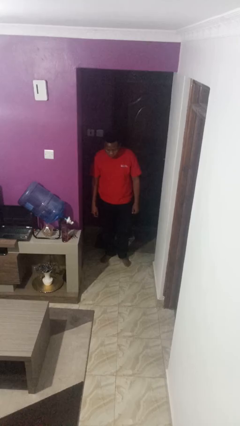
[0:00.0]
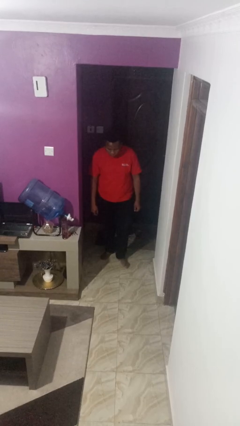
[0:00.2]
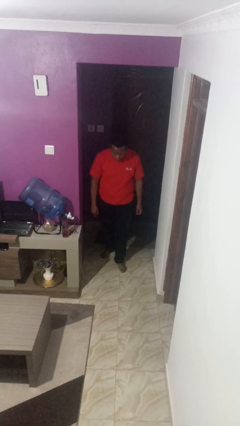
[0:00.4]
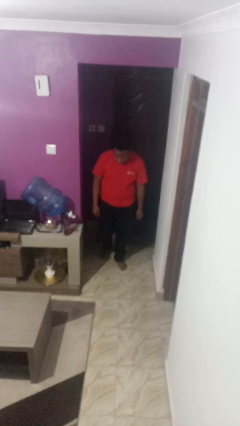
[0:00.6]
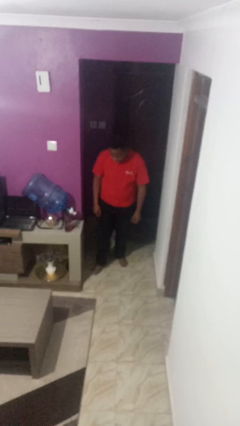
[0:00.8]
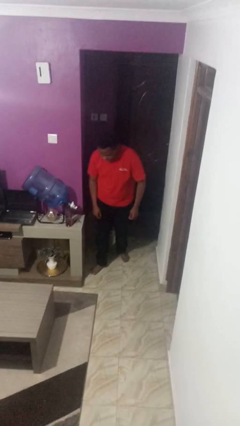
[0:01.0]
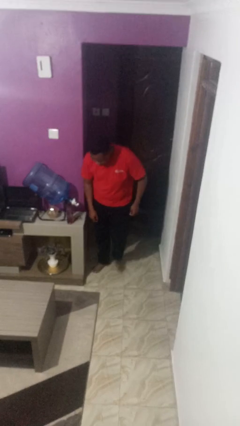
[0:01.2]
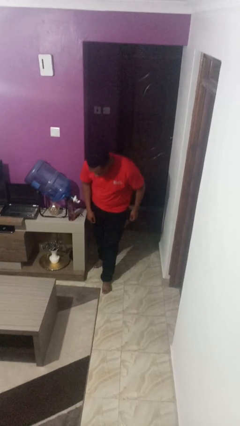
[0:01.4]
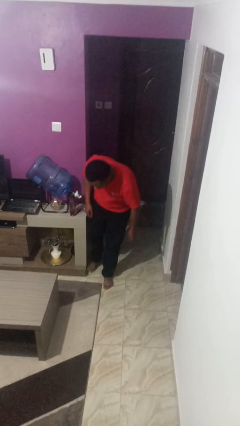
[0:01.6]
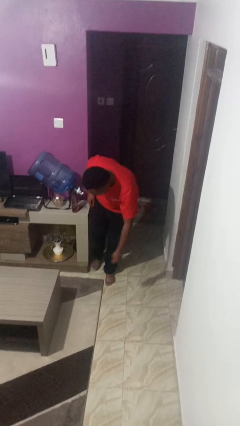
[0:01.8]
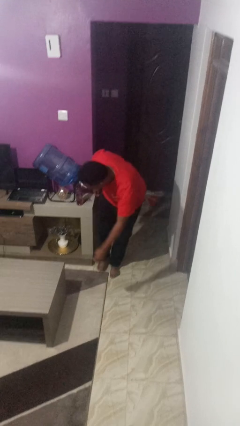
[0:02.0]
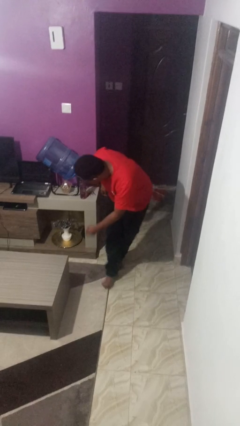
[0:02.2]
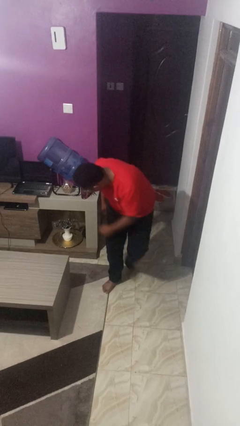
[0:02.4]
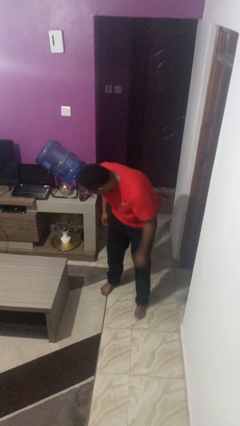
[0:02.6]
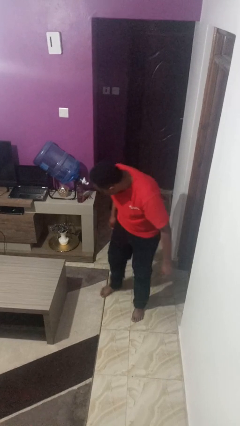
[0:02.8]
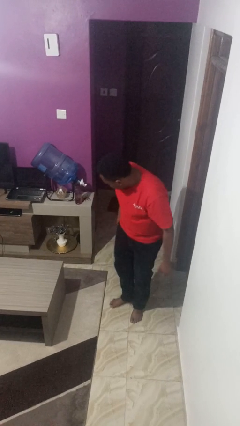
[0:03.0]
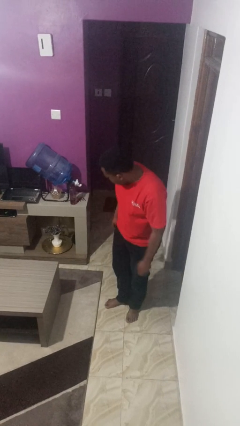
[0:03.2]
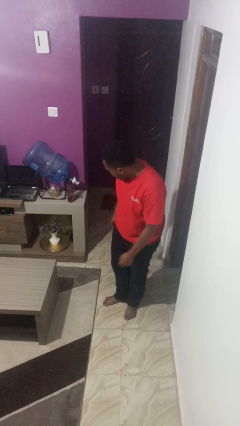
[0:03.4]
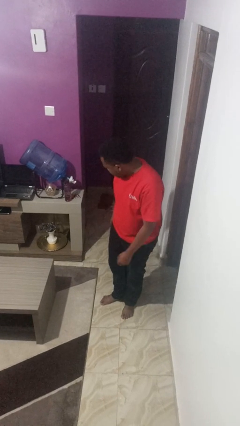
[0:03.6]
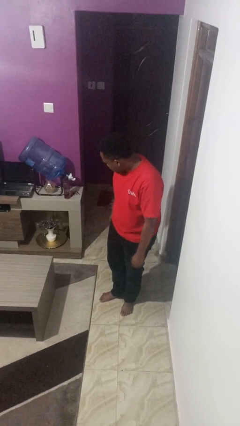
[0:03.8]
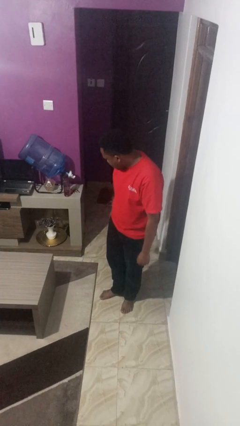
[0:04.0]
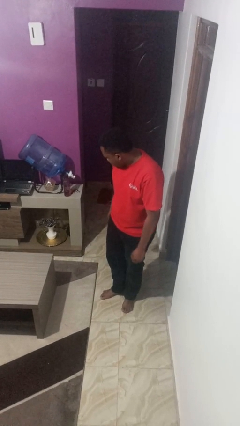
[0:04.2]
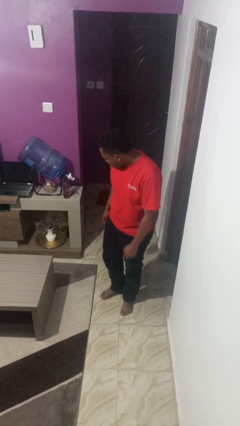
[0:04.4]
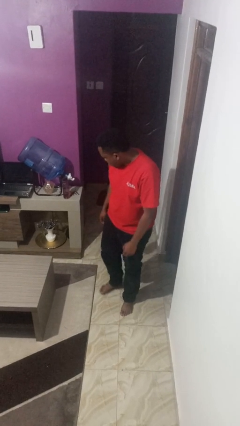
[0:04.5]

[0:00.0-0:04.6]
person stubs toe

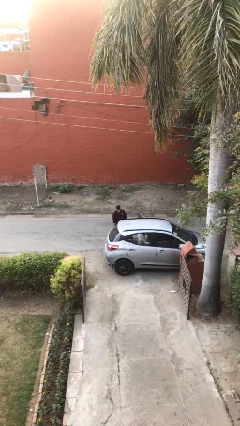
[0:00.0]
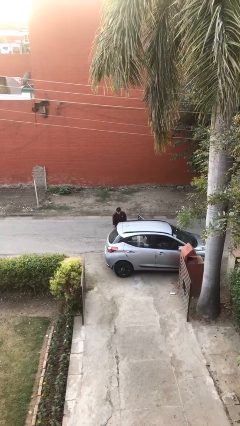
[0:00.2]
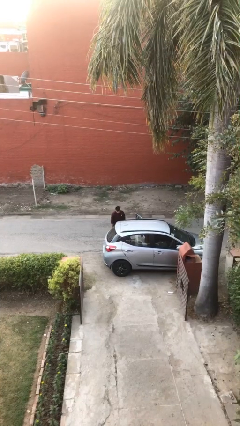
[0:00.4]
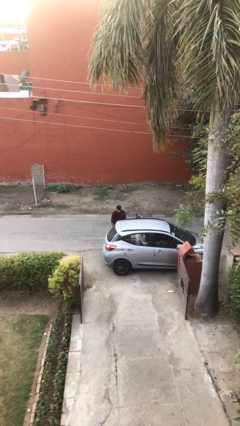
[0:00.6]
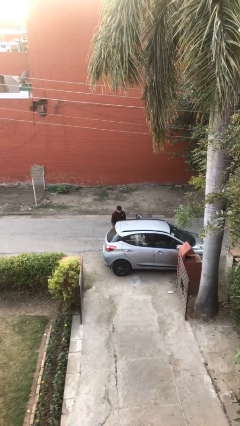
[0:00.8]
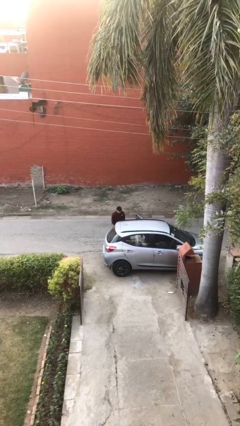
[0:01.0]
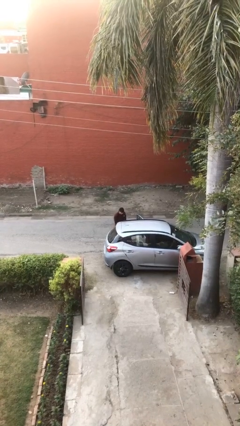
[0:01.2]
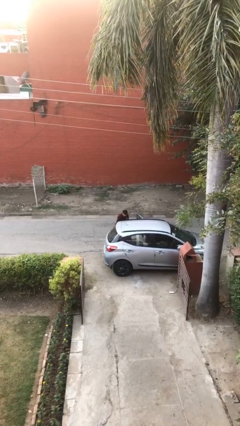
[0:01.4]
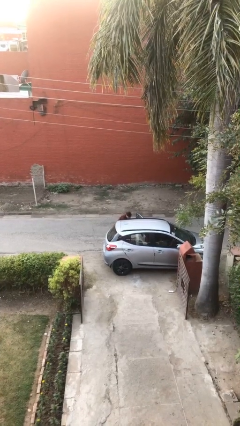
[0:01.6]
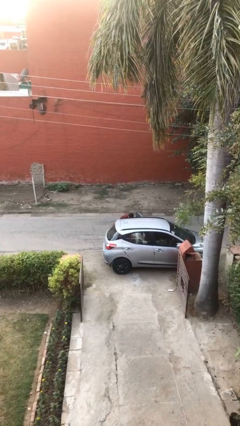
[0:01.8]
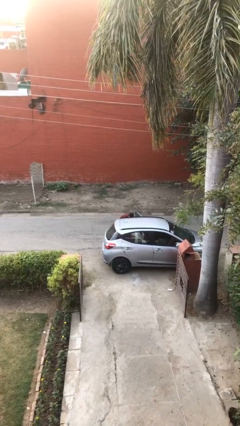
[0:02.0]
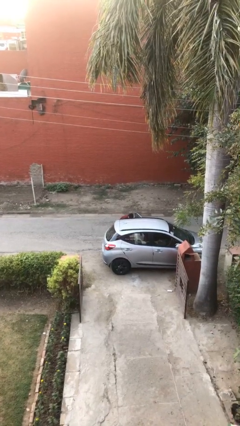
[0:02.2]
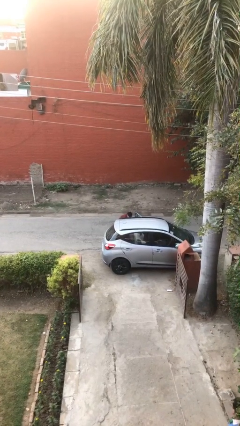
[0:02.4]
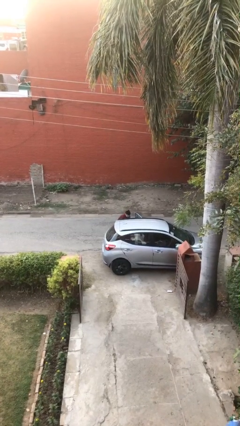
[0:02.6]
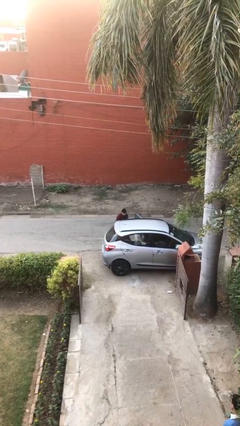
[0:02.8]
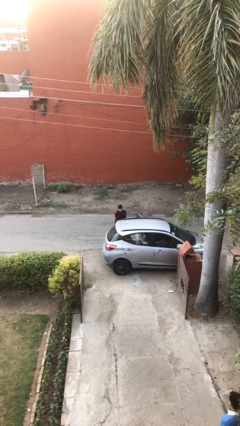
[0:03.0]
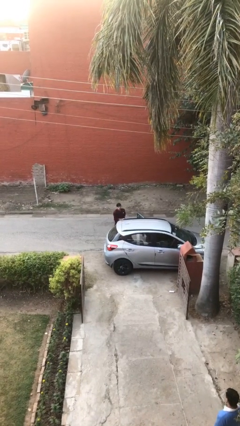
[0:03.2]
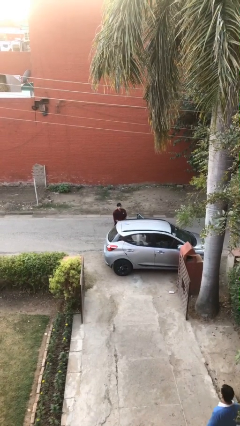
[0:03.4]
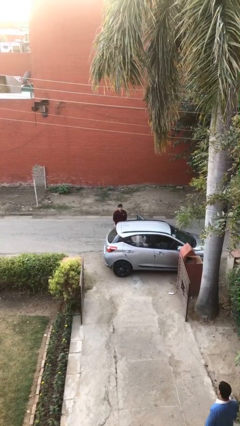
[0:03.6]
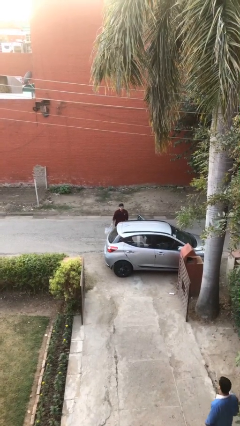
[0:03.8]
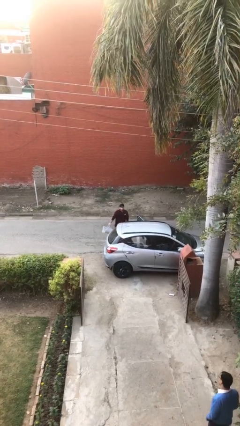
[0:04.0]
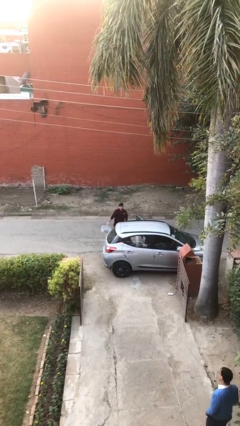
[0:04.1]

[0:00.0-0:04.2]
person unloads car

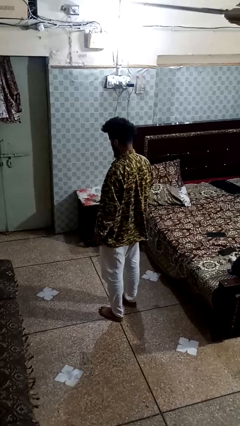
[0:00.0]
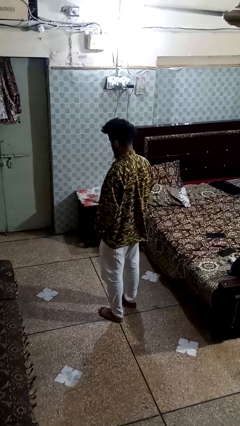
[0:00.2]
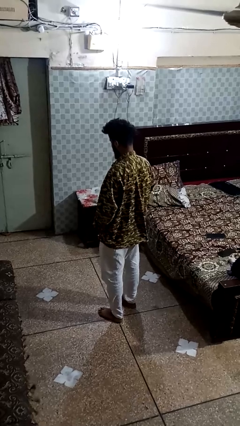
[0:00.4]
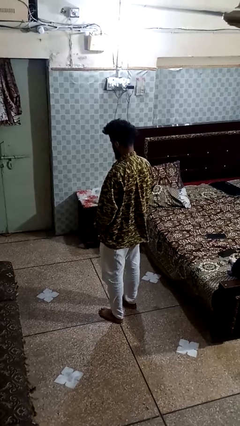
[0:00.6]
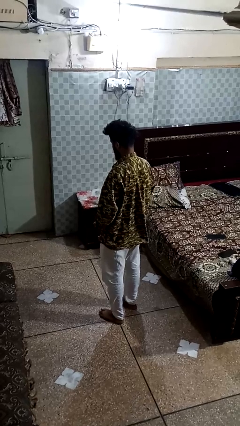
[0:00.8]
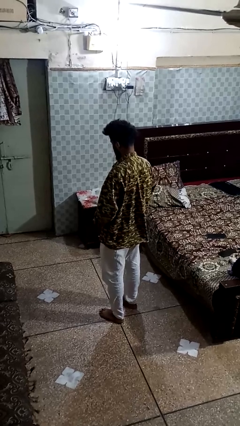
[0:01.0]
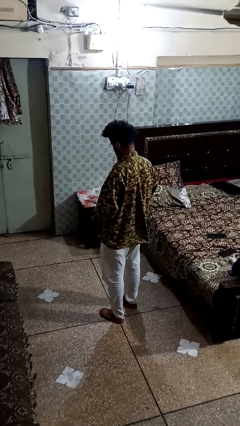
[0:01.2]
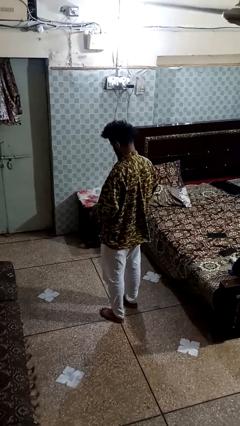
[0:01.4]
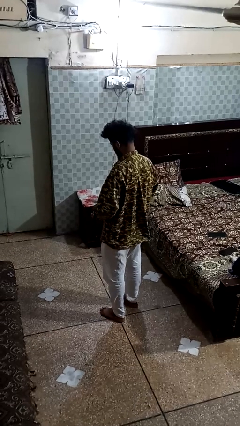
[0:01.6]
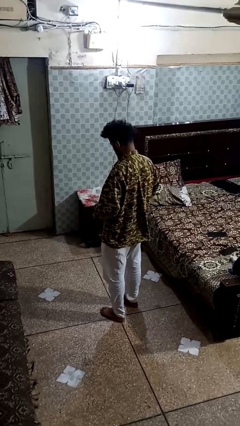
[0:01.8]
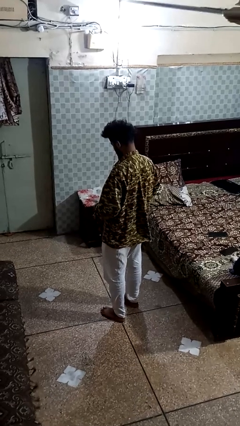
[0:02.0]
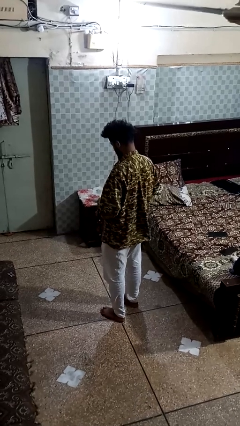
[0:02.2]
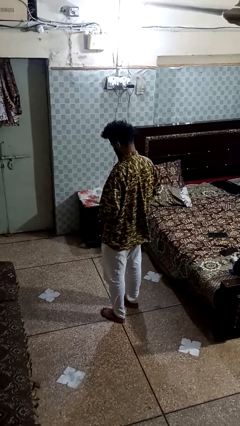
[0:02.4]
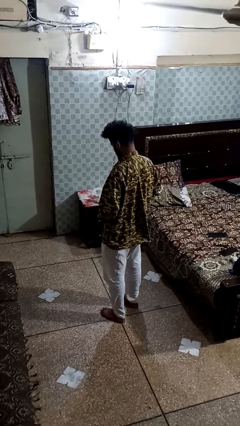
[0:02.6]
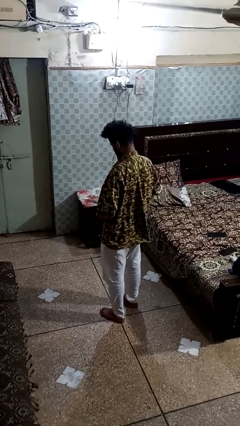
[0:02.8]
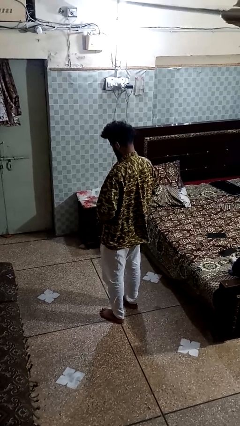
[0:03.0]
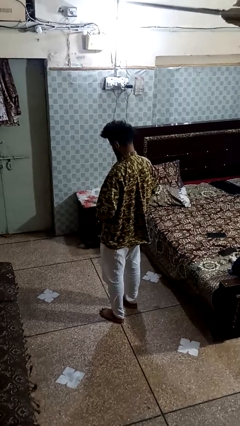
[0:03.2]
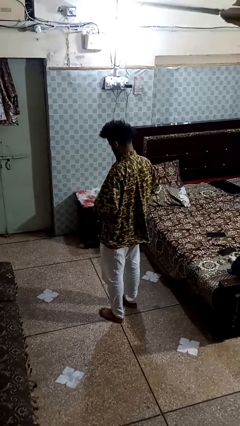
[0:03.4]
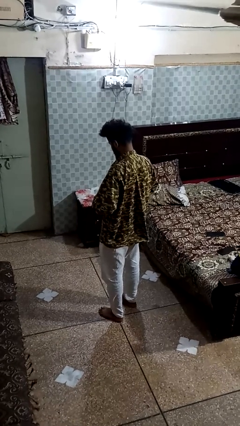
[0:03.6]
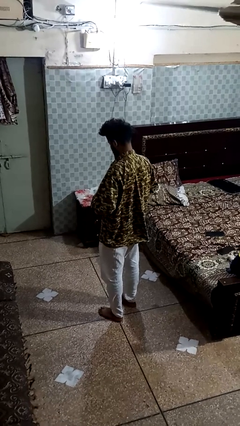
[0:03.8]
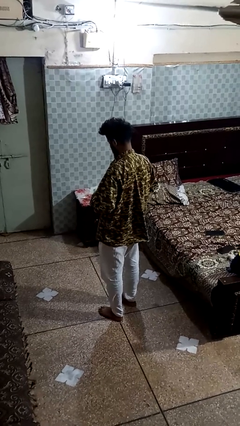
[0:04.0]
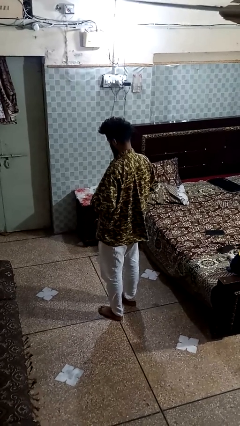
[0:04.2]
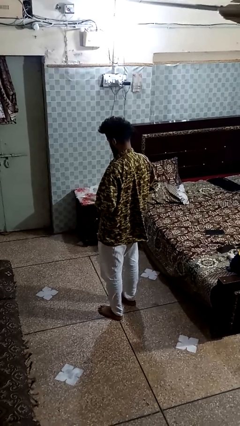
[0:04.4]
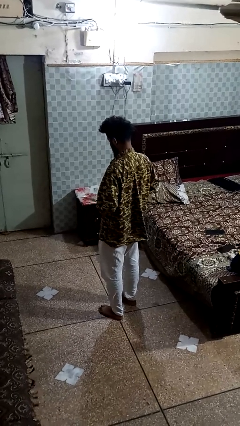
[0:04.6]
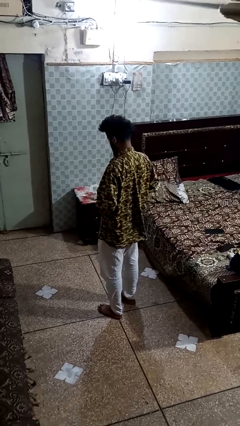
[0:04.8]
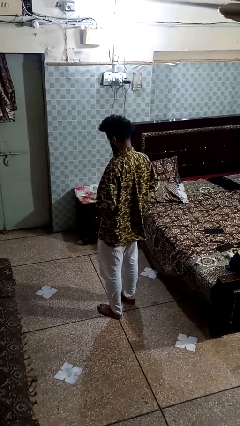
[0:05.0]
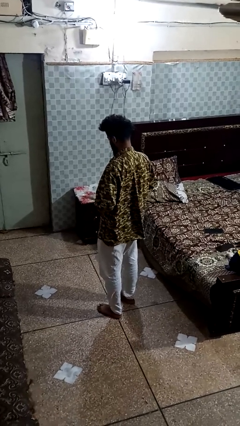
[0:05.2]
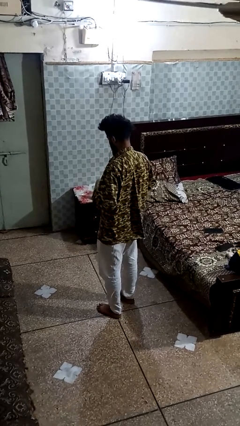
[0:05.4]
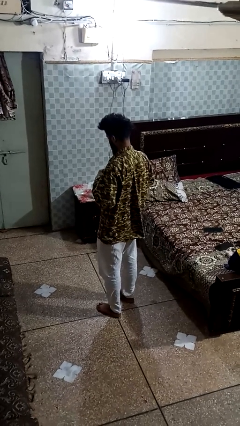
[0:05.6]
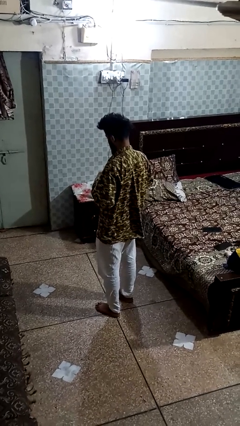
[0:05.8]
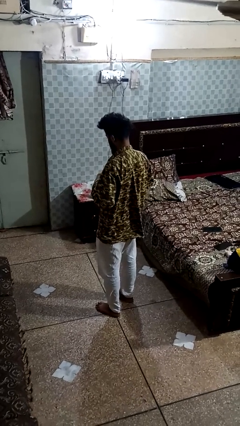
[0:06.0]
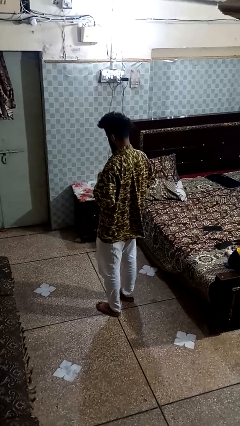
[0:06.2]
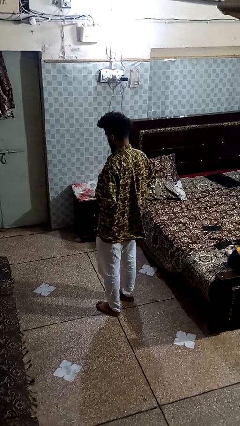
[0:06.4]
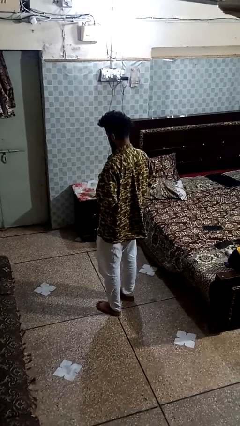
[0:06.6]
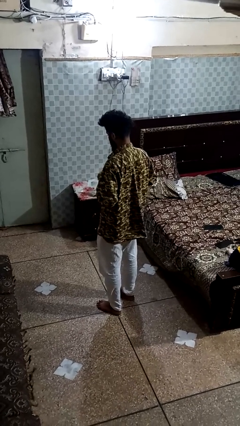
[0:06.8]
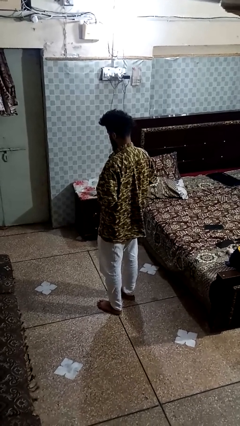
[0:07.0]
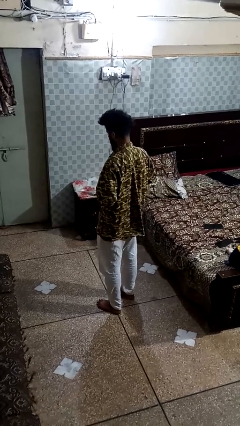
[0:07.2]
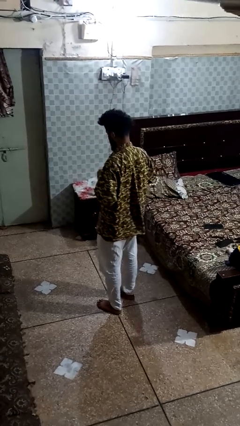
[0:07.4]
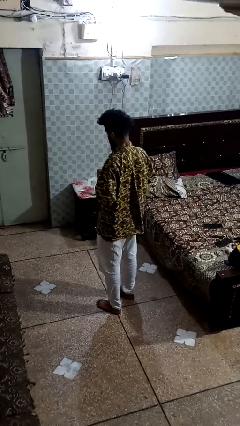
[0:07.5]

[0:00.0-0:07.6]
person buttons shirt

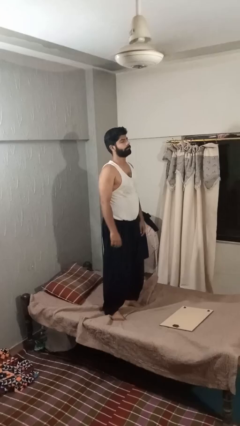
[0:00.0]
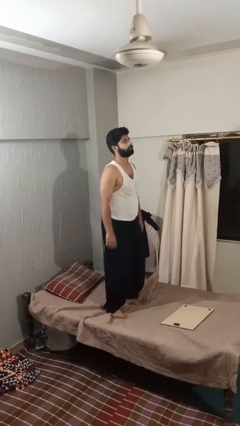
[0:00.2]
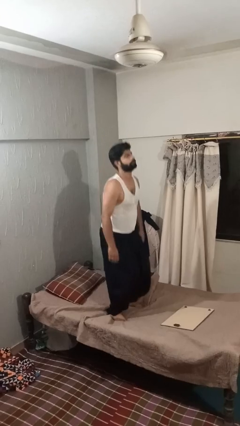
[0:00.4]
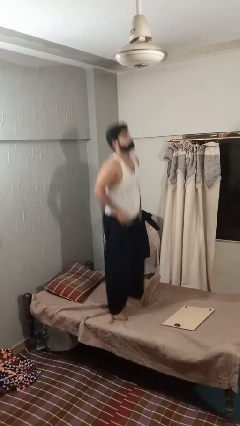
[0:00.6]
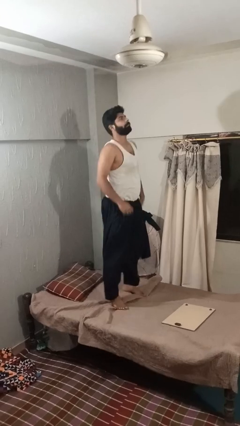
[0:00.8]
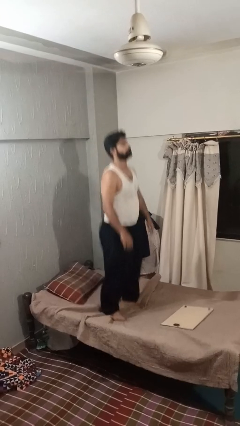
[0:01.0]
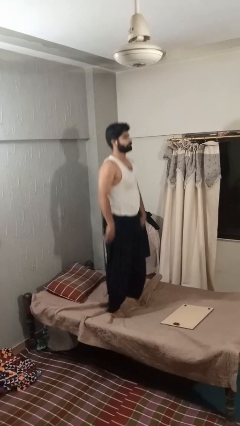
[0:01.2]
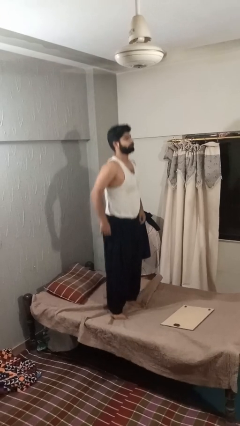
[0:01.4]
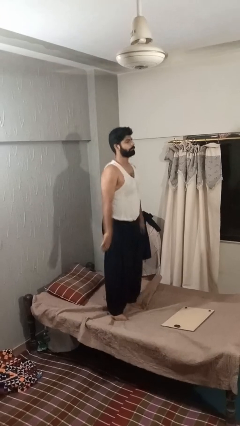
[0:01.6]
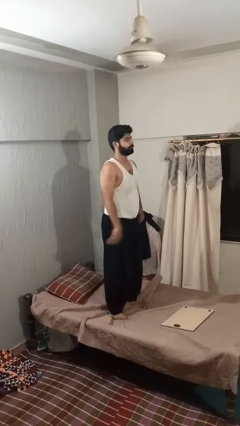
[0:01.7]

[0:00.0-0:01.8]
person jumps on bed
